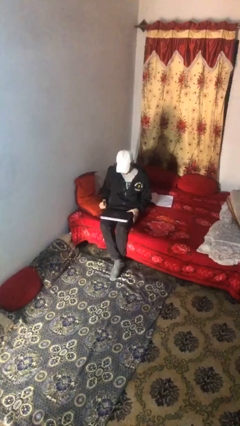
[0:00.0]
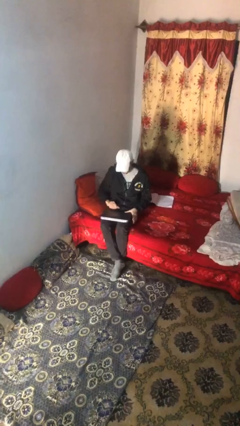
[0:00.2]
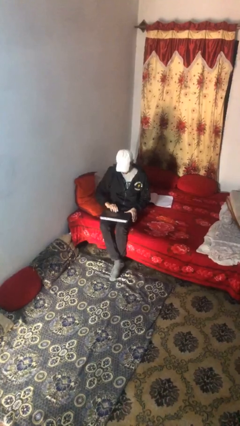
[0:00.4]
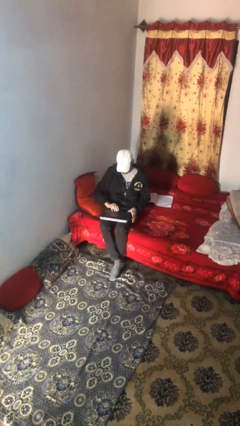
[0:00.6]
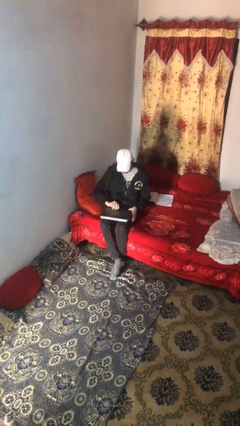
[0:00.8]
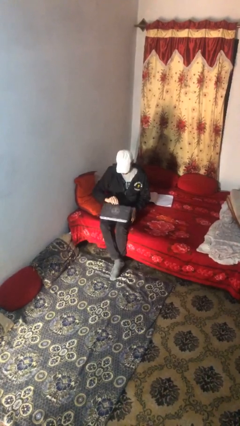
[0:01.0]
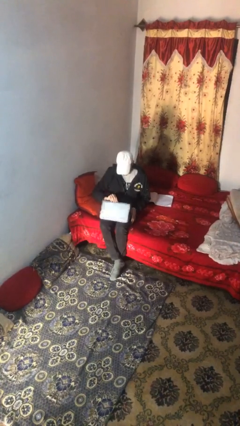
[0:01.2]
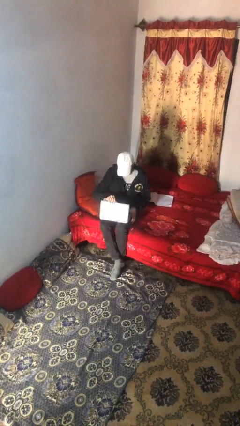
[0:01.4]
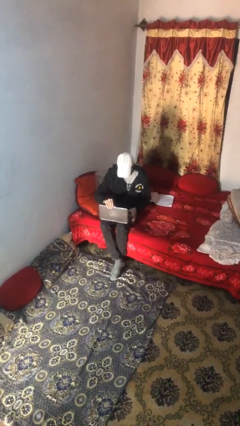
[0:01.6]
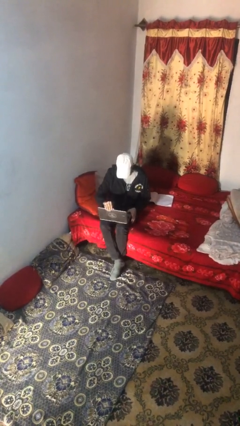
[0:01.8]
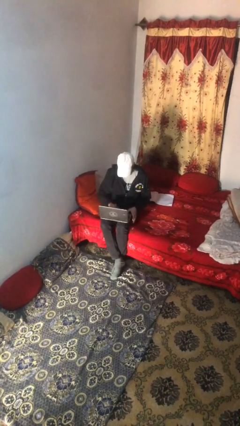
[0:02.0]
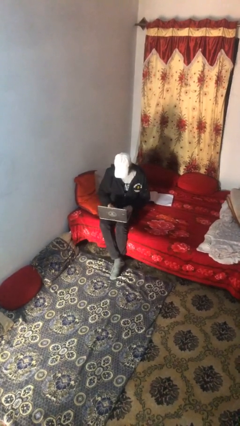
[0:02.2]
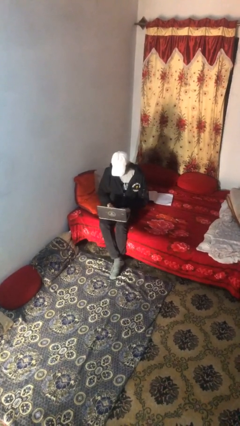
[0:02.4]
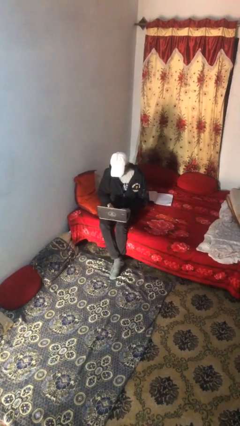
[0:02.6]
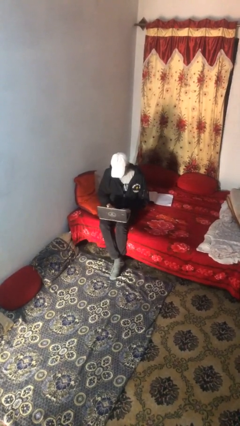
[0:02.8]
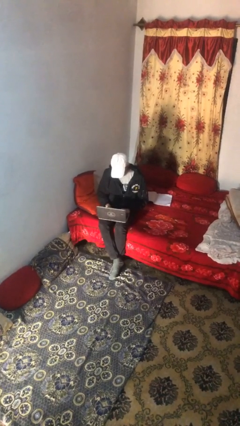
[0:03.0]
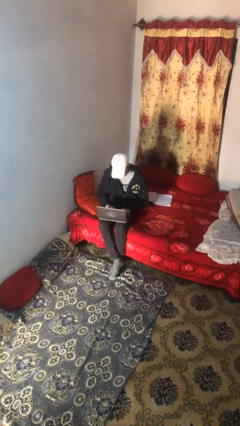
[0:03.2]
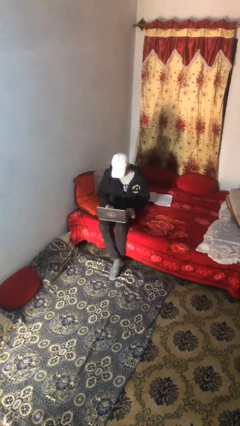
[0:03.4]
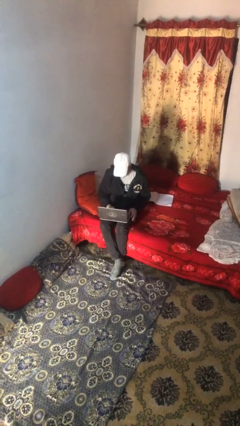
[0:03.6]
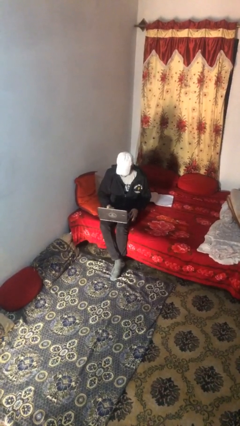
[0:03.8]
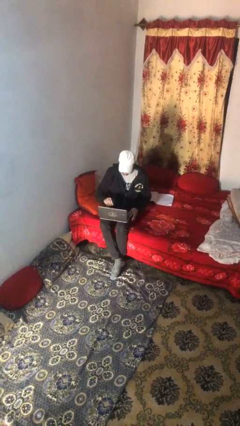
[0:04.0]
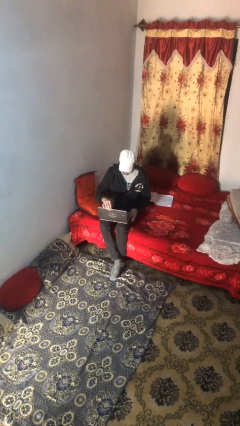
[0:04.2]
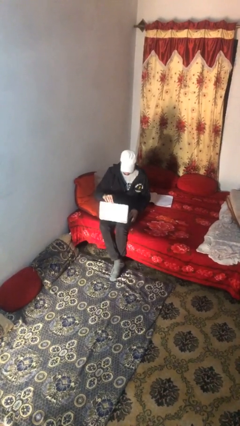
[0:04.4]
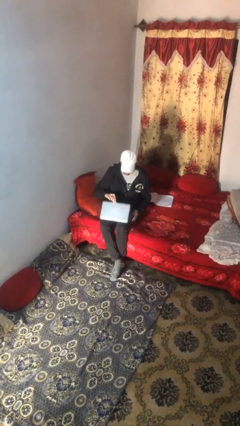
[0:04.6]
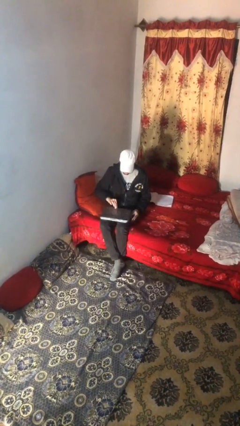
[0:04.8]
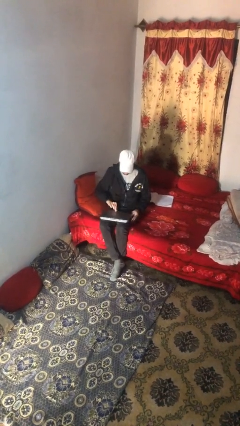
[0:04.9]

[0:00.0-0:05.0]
person interacts with laptop

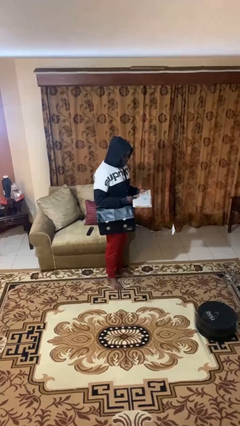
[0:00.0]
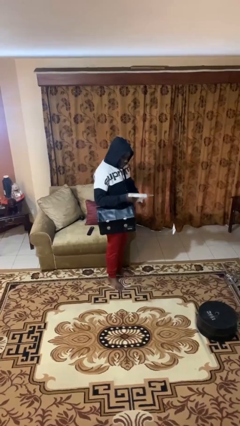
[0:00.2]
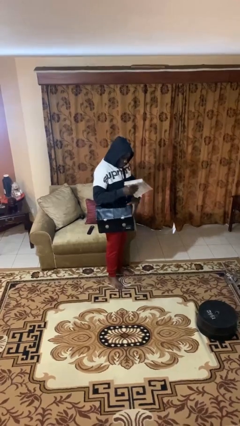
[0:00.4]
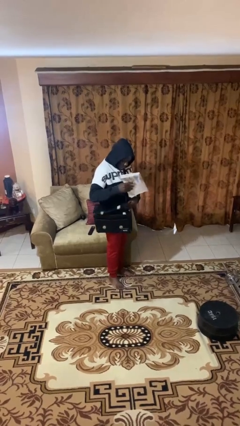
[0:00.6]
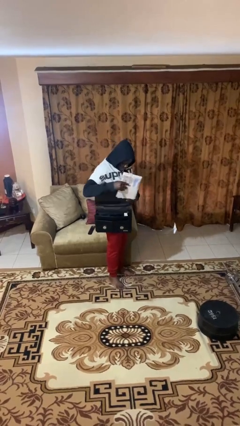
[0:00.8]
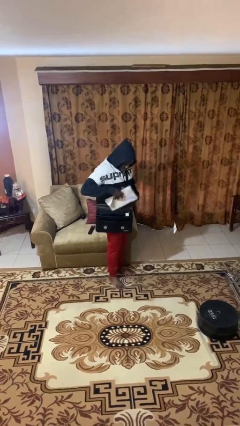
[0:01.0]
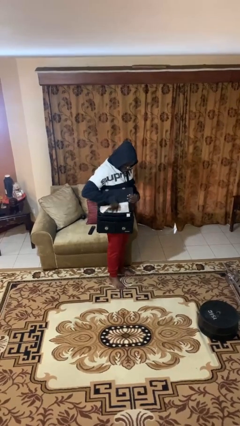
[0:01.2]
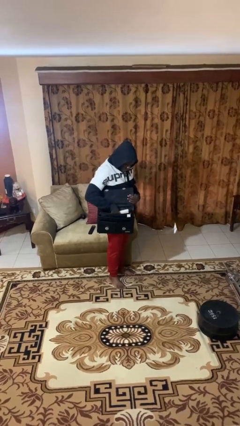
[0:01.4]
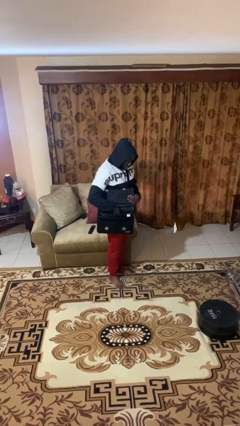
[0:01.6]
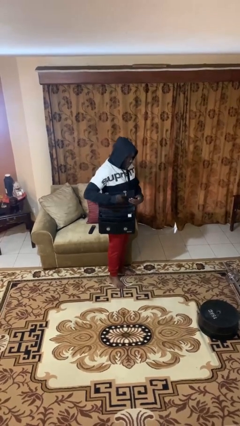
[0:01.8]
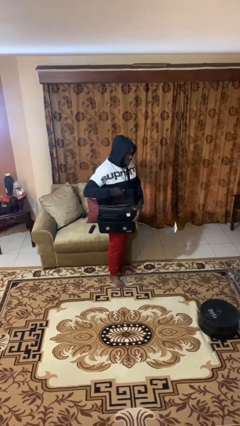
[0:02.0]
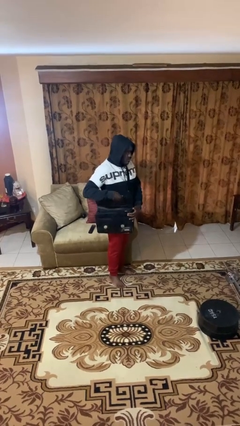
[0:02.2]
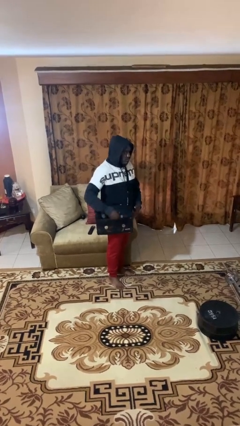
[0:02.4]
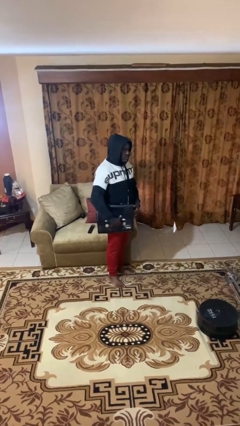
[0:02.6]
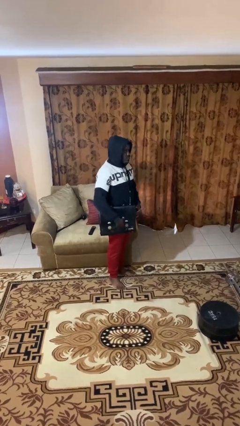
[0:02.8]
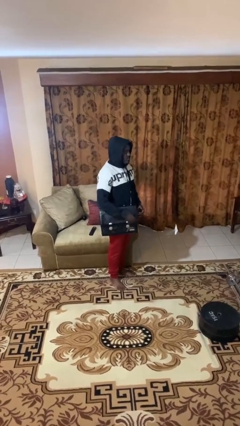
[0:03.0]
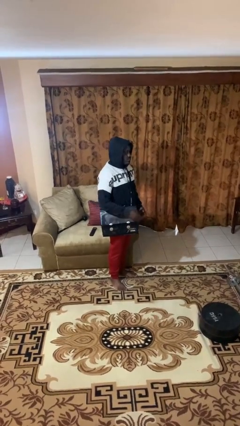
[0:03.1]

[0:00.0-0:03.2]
person puts object into purse

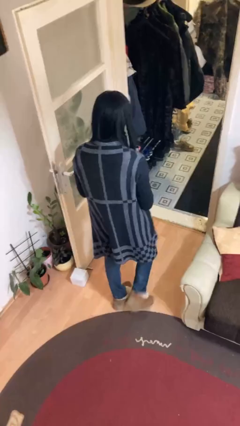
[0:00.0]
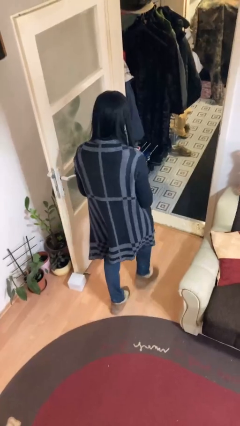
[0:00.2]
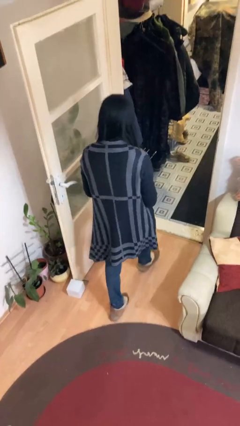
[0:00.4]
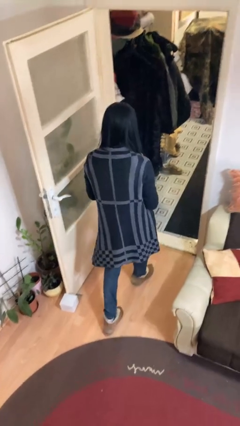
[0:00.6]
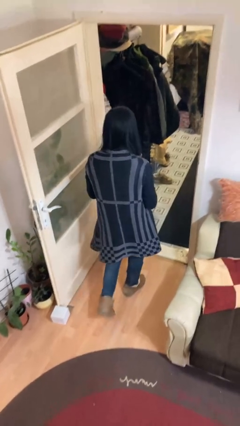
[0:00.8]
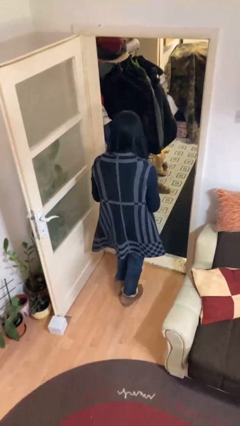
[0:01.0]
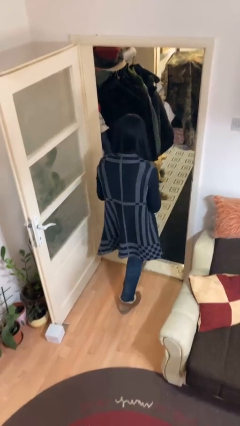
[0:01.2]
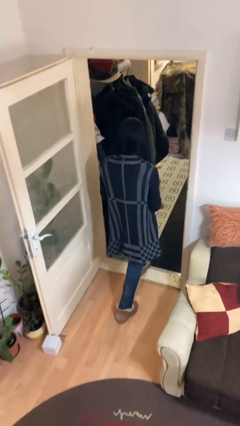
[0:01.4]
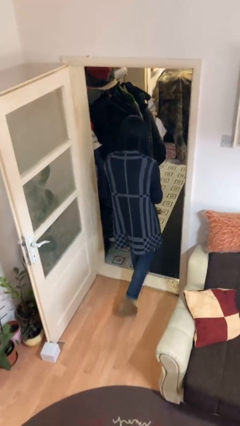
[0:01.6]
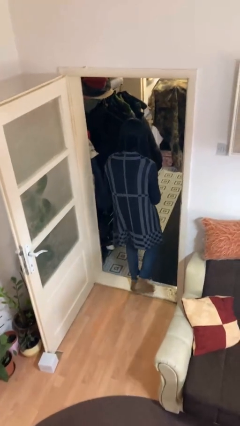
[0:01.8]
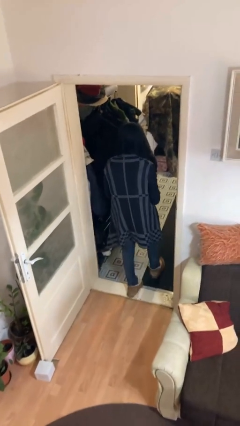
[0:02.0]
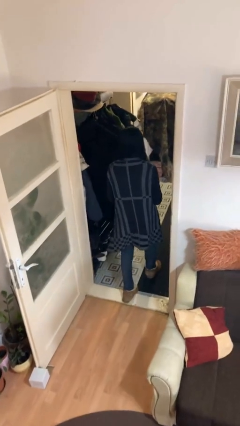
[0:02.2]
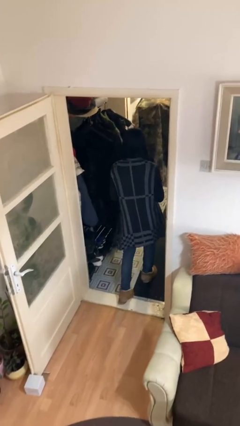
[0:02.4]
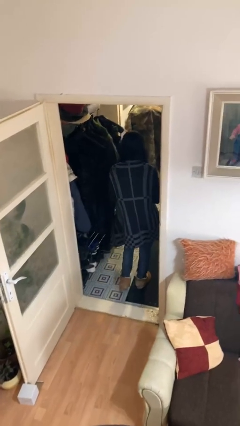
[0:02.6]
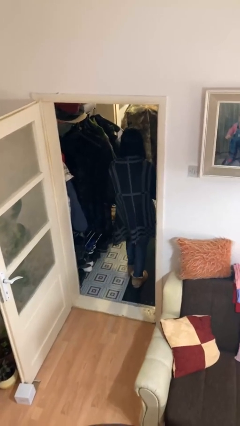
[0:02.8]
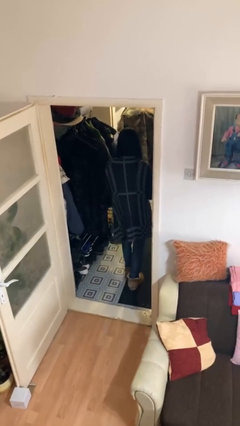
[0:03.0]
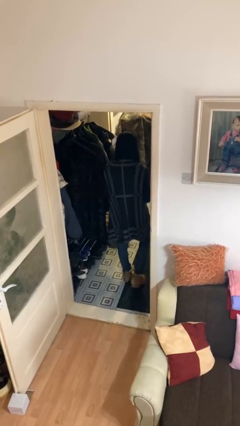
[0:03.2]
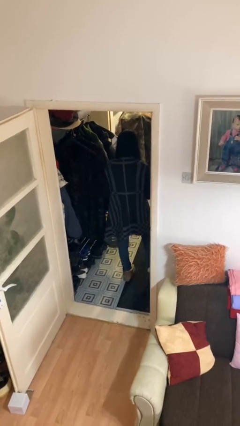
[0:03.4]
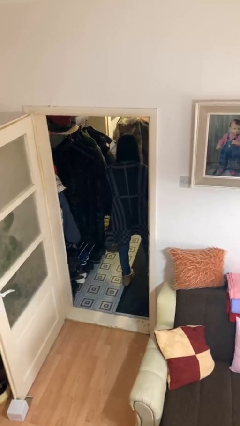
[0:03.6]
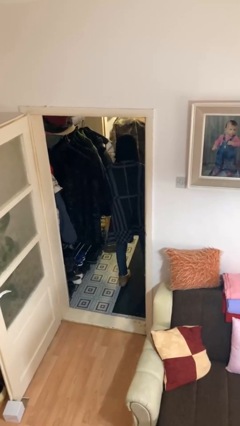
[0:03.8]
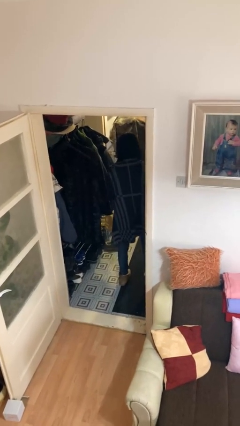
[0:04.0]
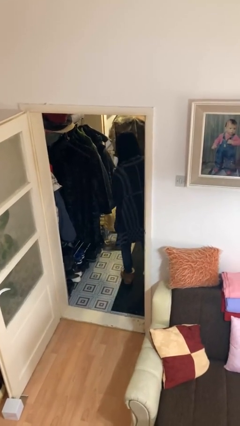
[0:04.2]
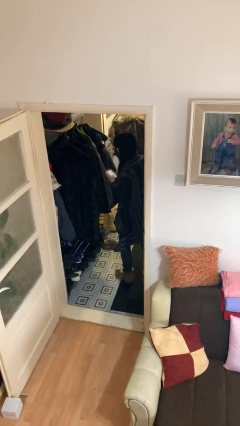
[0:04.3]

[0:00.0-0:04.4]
person exits scene through structure

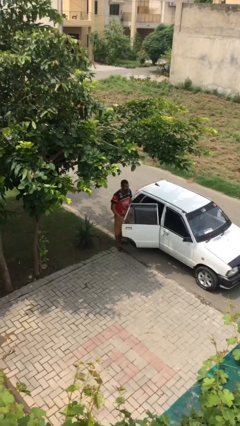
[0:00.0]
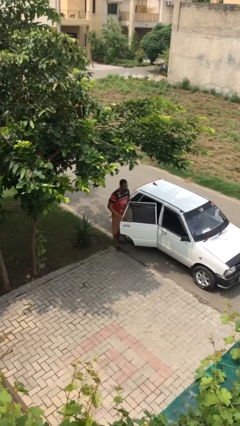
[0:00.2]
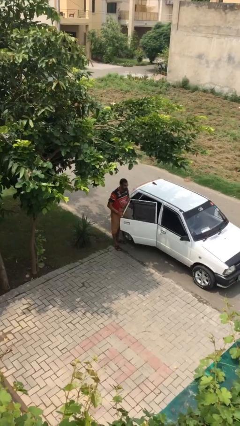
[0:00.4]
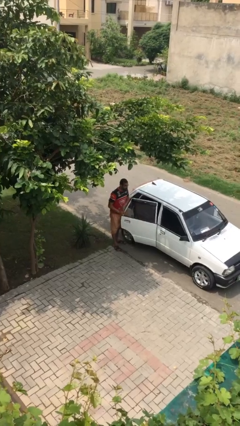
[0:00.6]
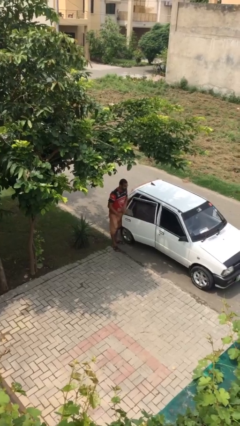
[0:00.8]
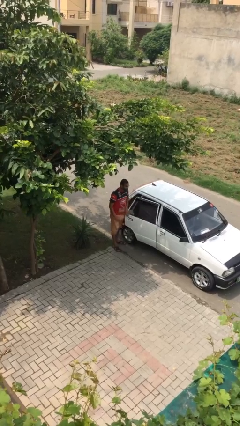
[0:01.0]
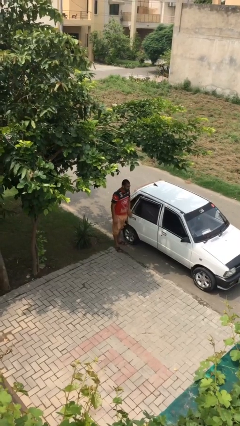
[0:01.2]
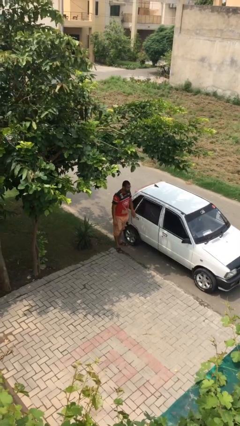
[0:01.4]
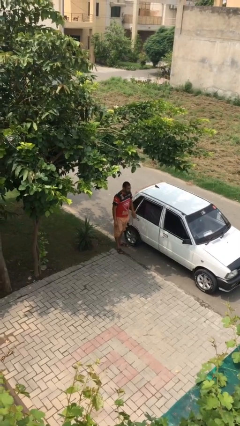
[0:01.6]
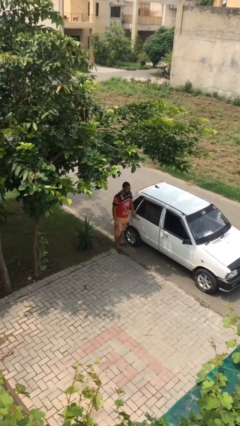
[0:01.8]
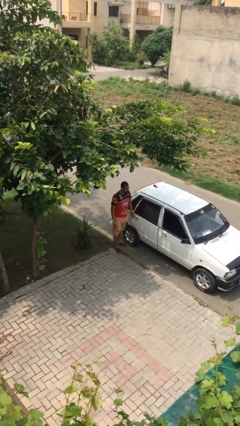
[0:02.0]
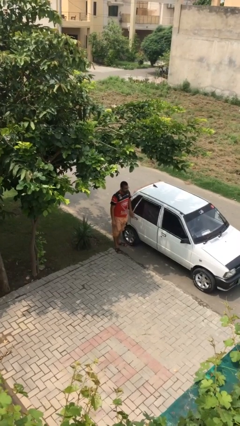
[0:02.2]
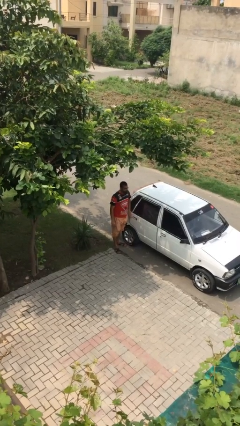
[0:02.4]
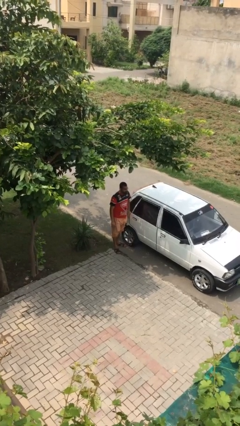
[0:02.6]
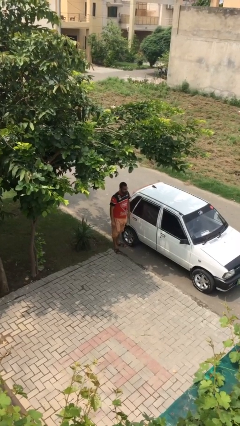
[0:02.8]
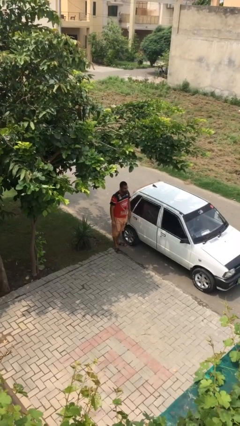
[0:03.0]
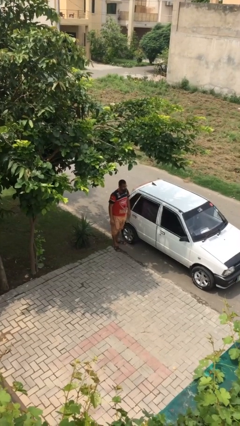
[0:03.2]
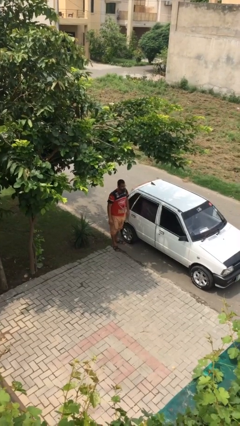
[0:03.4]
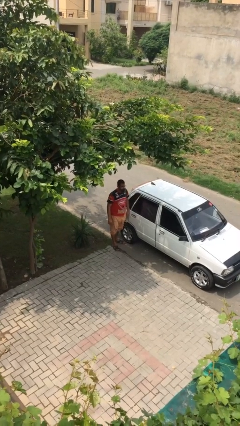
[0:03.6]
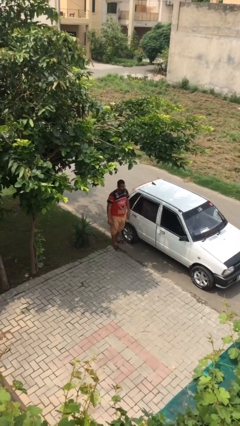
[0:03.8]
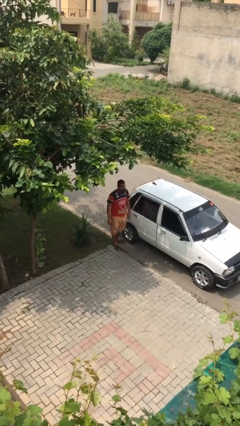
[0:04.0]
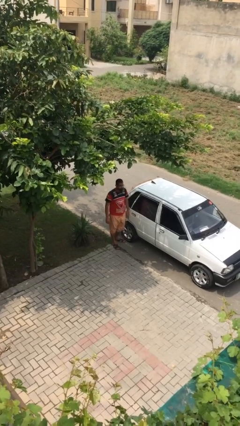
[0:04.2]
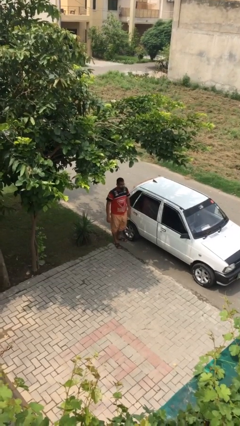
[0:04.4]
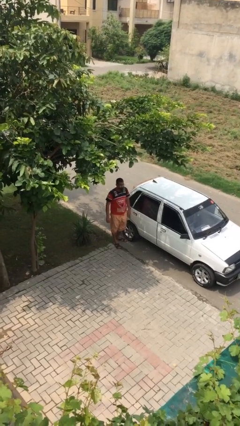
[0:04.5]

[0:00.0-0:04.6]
person closes car door

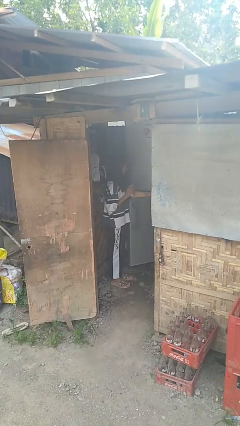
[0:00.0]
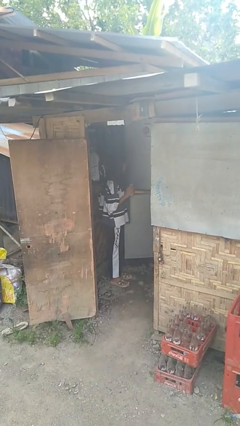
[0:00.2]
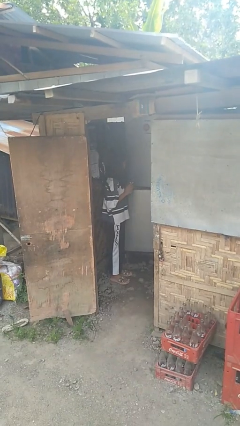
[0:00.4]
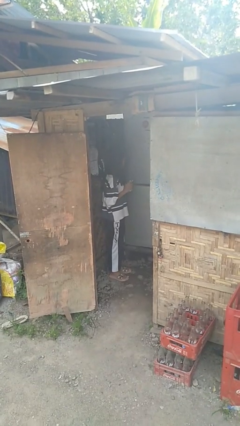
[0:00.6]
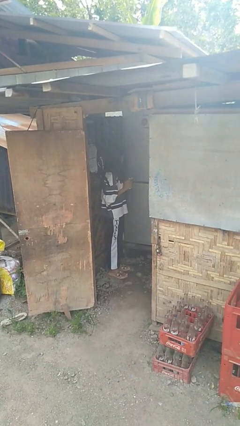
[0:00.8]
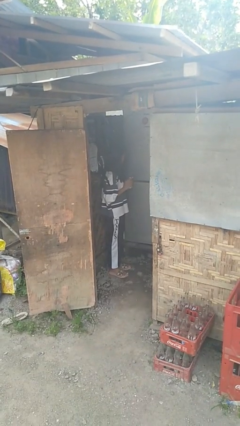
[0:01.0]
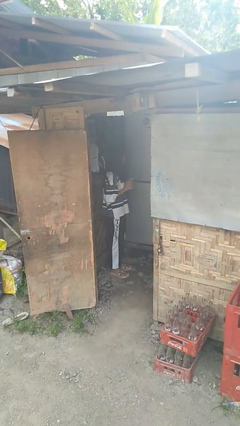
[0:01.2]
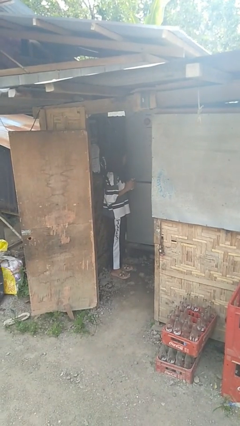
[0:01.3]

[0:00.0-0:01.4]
person closes refrigerator
